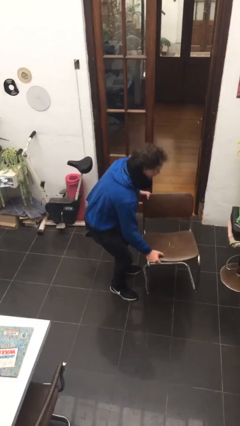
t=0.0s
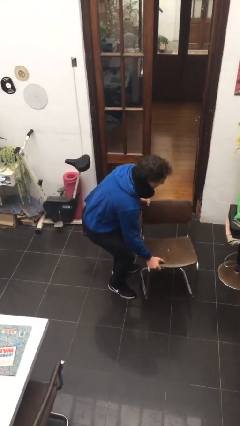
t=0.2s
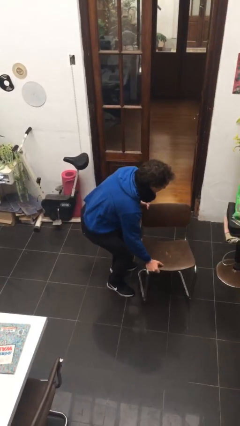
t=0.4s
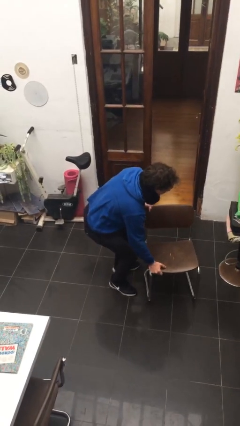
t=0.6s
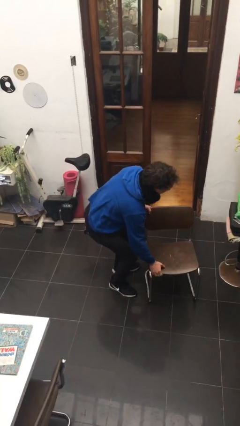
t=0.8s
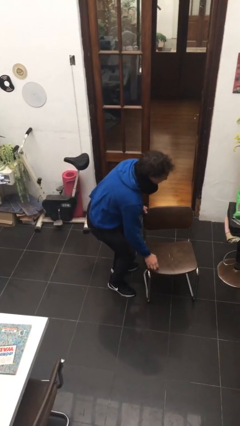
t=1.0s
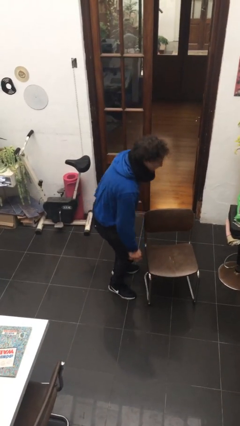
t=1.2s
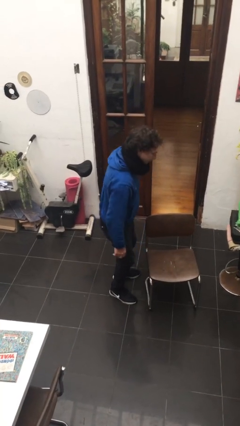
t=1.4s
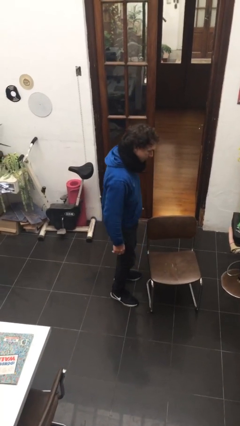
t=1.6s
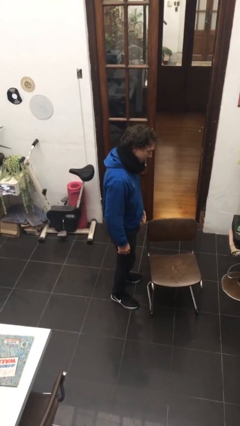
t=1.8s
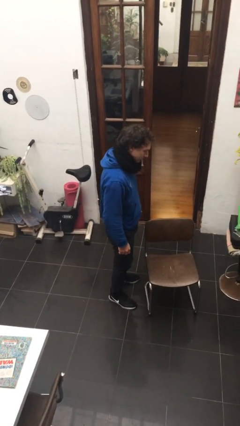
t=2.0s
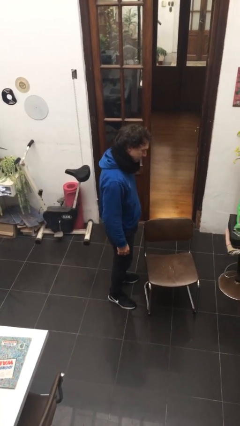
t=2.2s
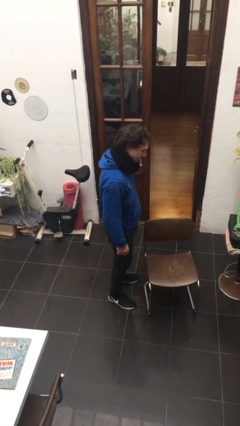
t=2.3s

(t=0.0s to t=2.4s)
person puts down object on floor

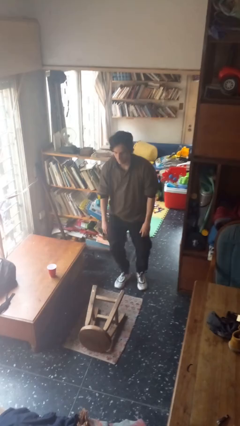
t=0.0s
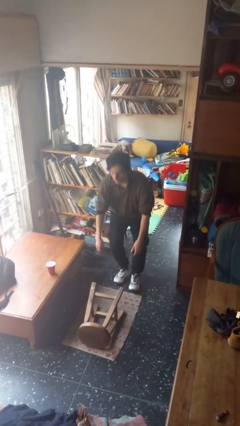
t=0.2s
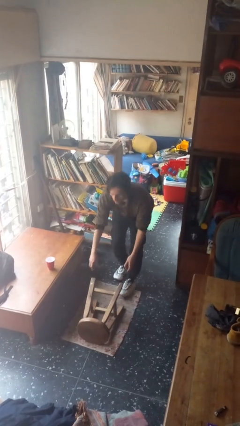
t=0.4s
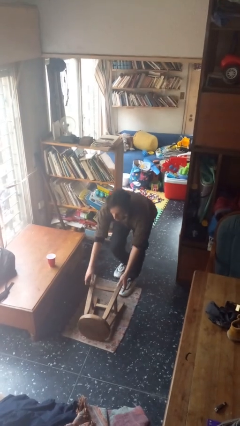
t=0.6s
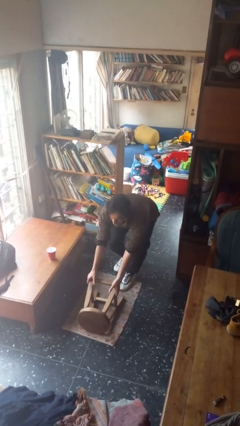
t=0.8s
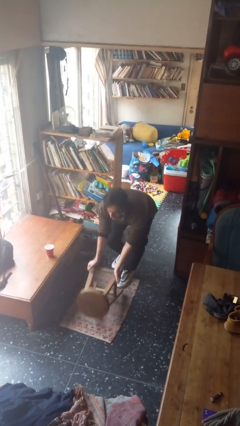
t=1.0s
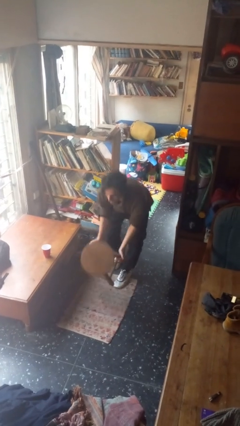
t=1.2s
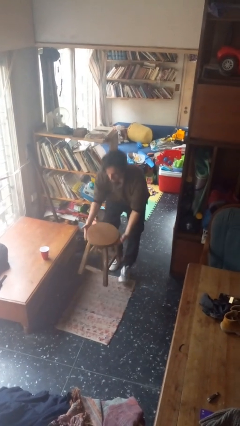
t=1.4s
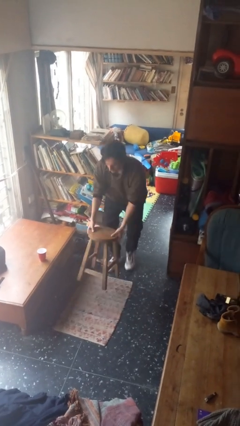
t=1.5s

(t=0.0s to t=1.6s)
person sets upright furniture

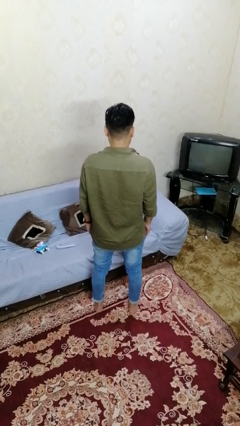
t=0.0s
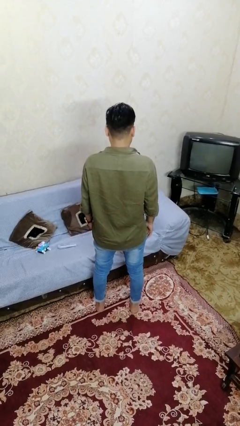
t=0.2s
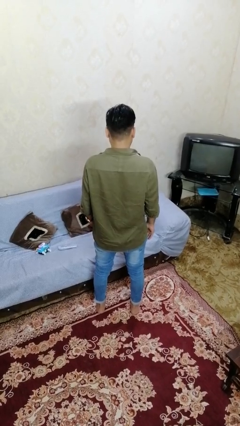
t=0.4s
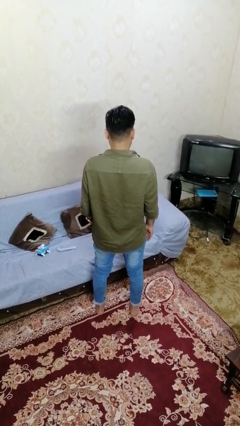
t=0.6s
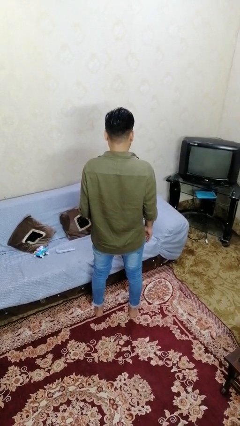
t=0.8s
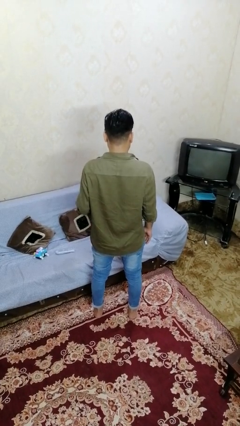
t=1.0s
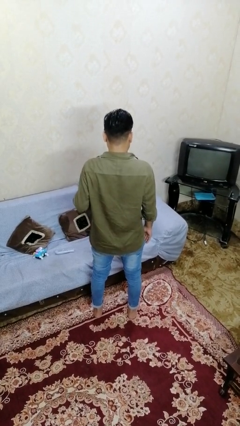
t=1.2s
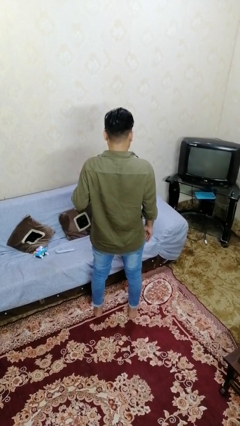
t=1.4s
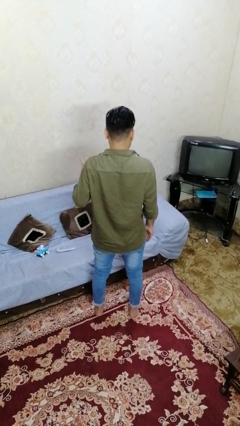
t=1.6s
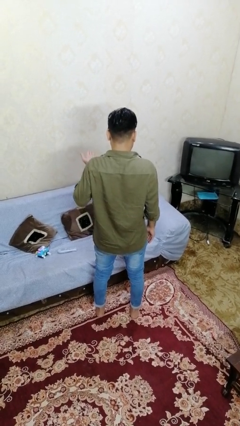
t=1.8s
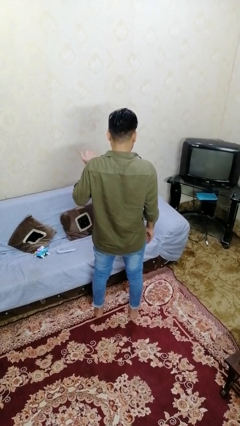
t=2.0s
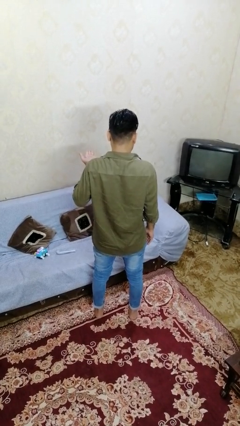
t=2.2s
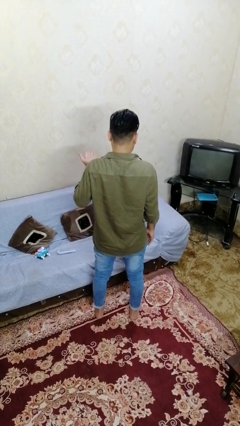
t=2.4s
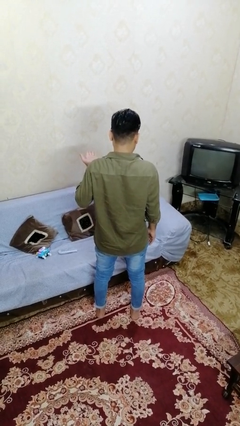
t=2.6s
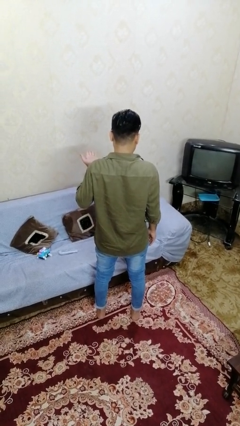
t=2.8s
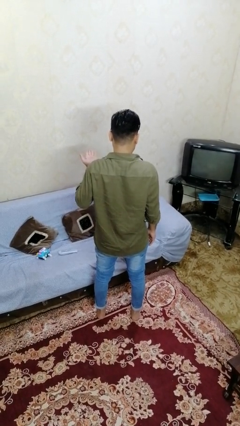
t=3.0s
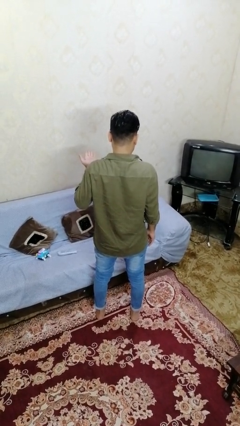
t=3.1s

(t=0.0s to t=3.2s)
person gestures swipe up

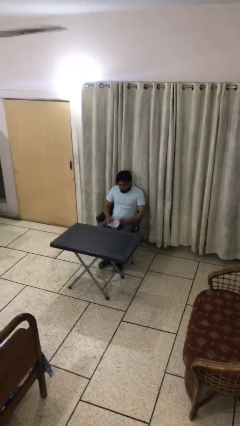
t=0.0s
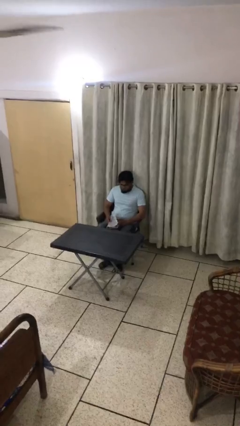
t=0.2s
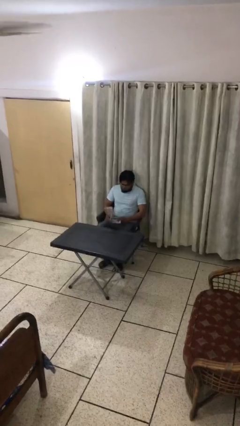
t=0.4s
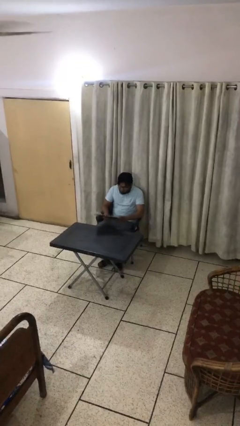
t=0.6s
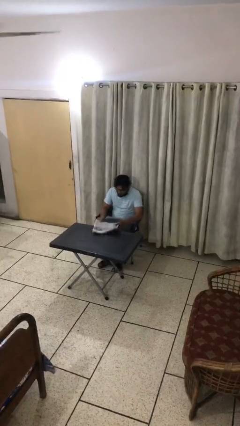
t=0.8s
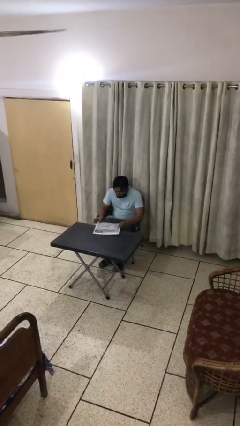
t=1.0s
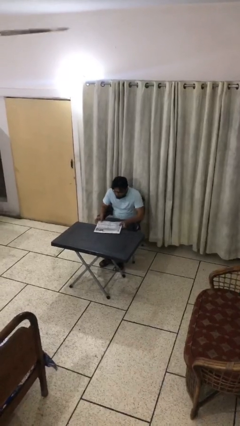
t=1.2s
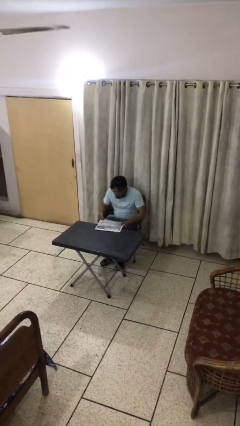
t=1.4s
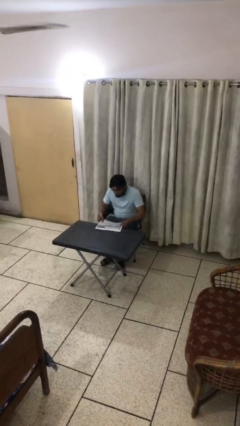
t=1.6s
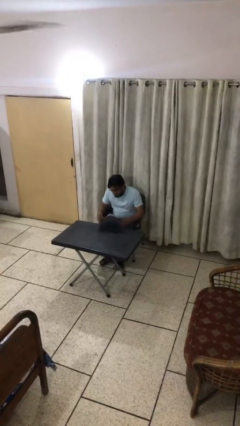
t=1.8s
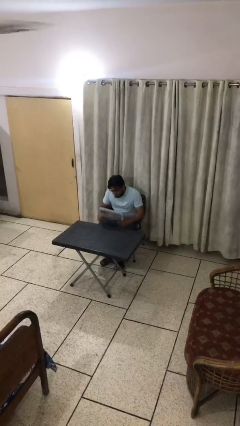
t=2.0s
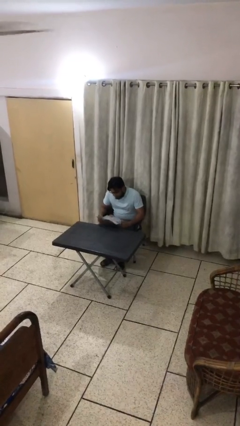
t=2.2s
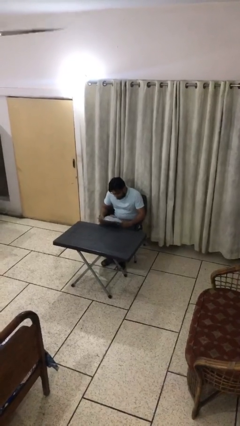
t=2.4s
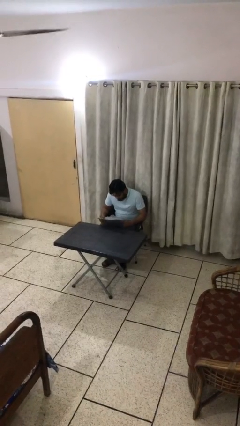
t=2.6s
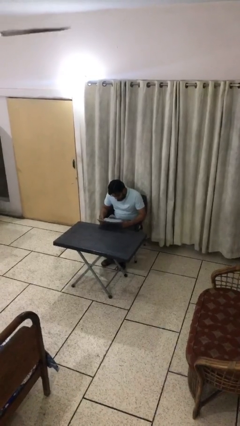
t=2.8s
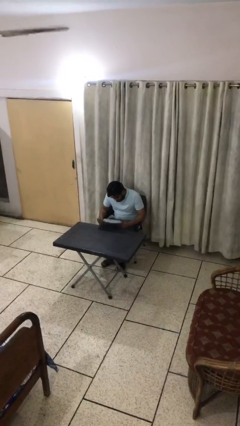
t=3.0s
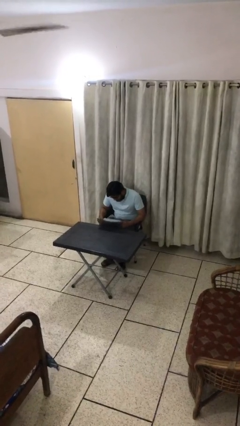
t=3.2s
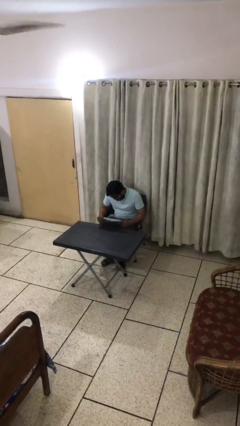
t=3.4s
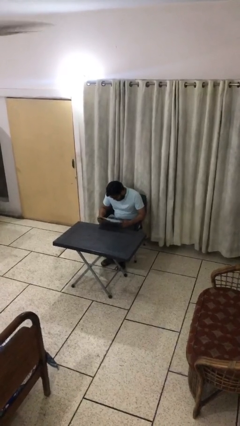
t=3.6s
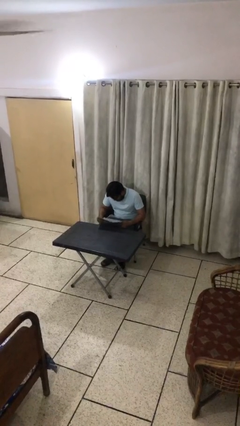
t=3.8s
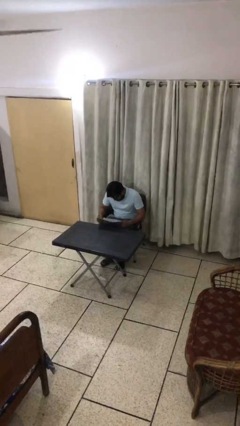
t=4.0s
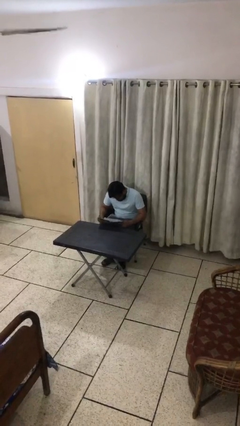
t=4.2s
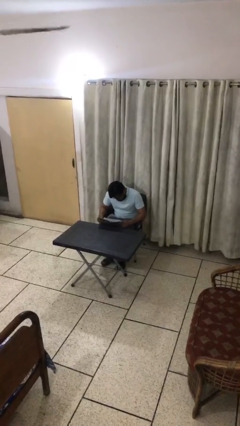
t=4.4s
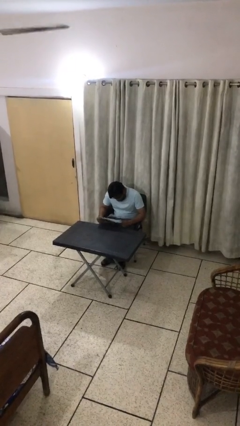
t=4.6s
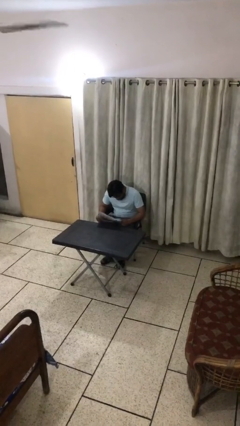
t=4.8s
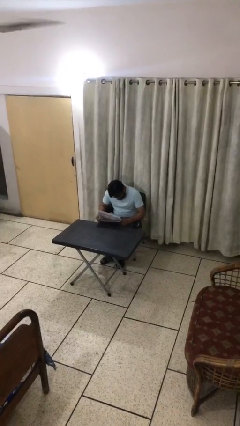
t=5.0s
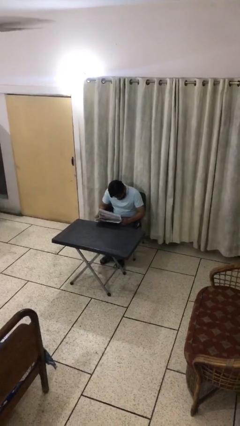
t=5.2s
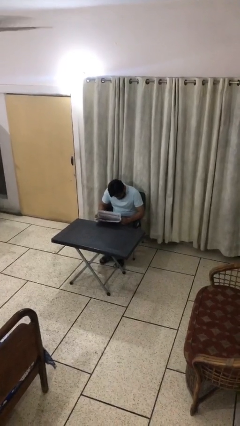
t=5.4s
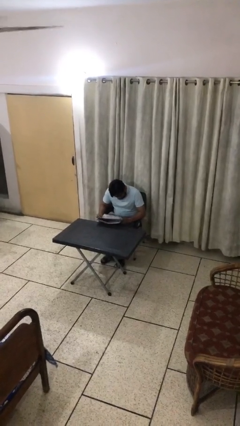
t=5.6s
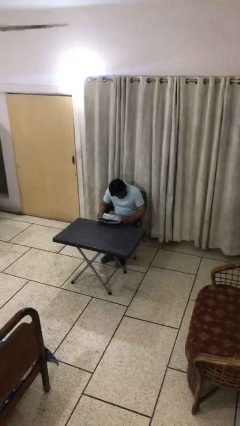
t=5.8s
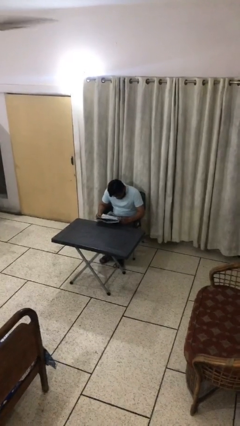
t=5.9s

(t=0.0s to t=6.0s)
person reads document

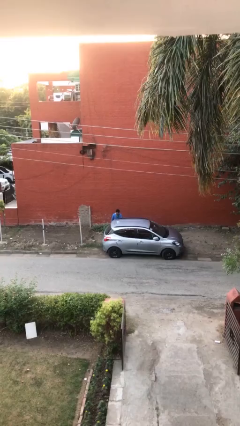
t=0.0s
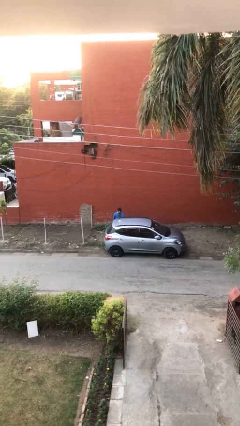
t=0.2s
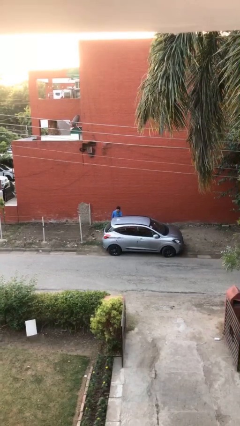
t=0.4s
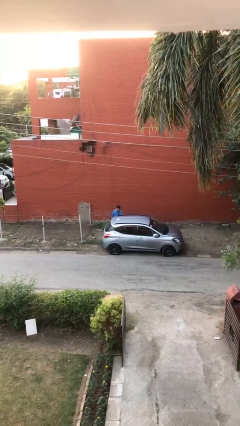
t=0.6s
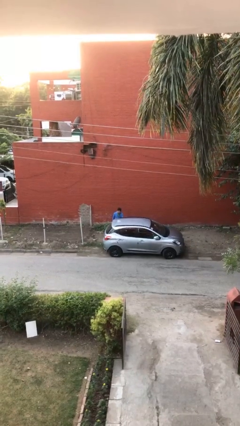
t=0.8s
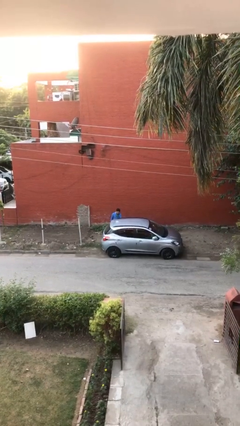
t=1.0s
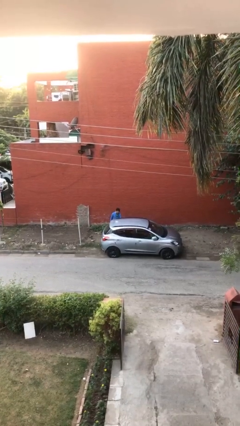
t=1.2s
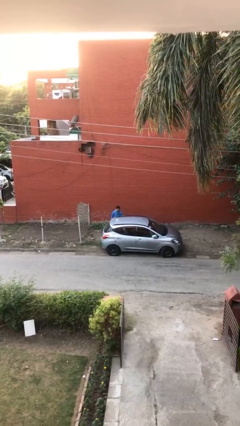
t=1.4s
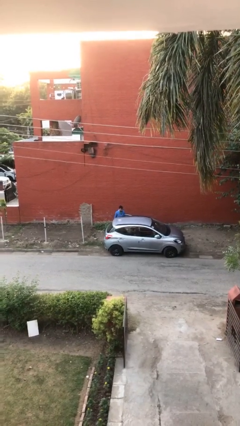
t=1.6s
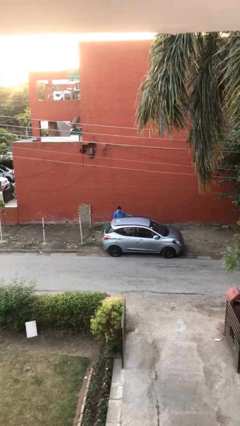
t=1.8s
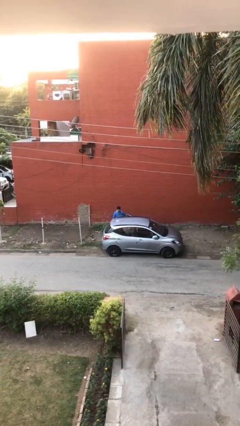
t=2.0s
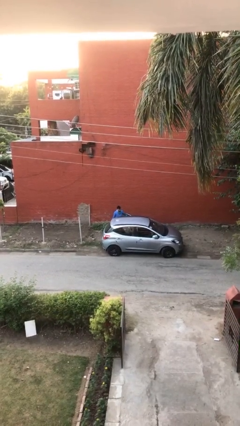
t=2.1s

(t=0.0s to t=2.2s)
person opens car door

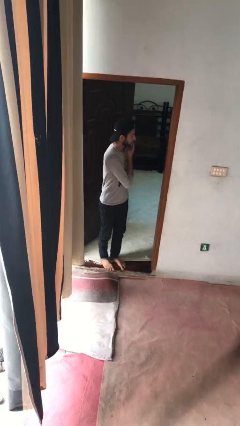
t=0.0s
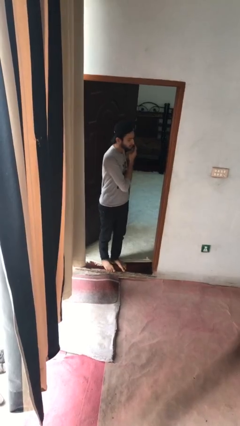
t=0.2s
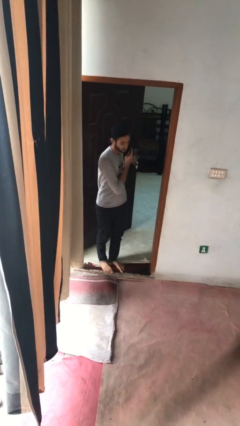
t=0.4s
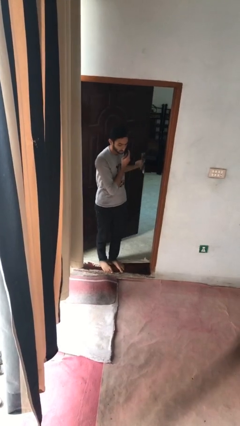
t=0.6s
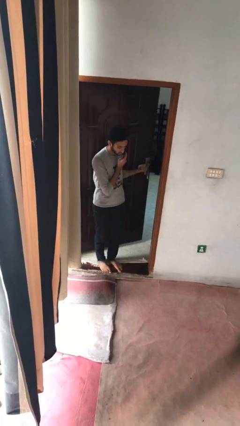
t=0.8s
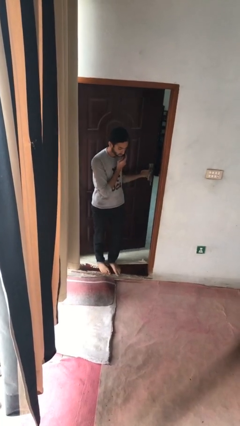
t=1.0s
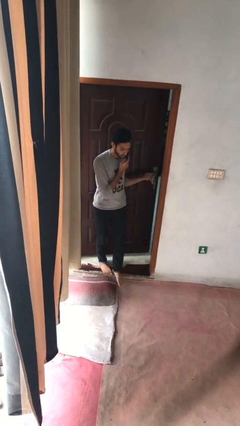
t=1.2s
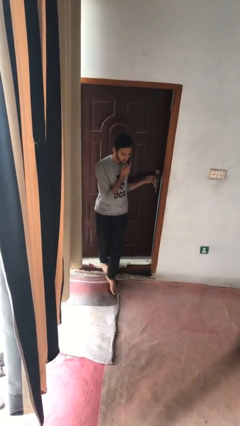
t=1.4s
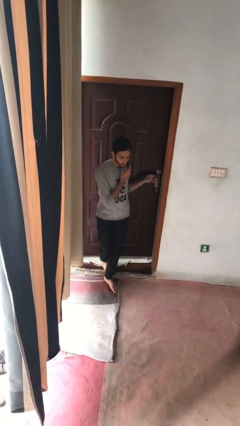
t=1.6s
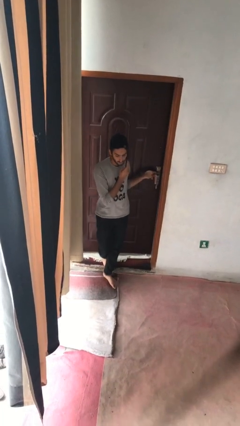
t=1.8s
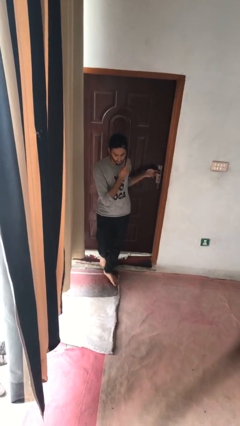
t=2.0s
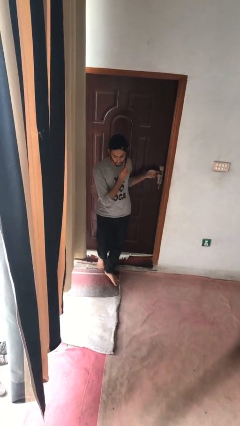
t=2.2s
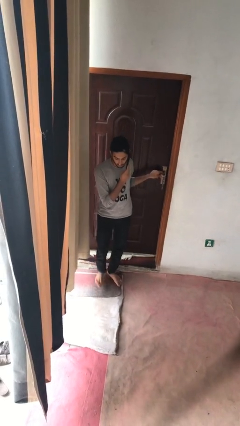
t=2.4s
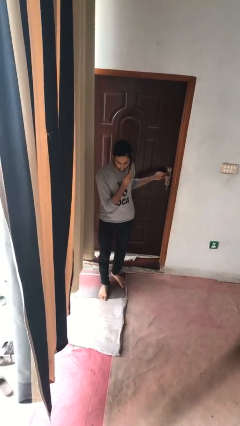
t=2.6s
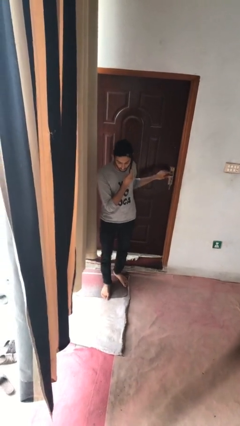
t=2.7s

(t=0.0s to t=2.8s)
person closes facility door
